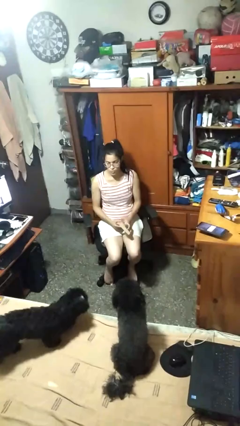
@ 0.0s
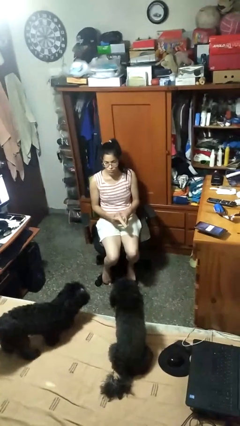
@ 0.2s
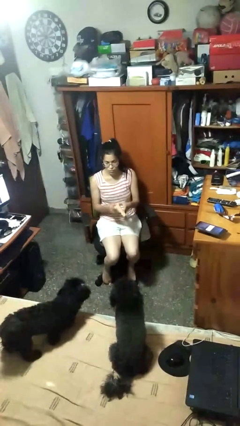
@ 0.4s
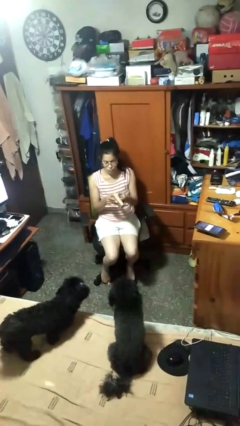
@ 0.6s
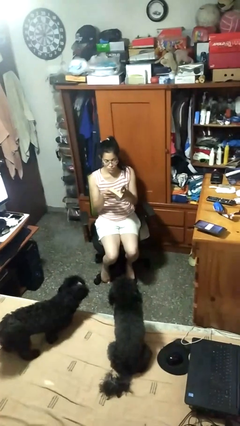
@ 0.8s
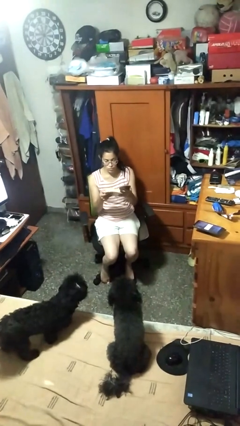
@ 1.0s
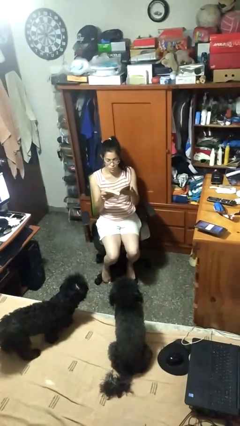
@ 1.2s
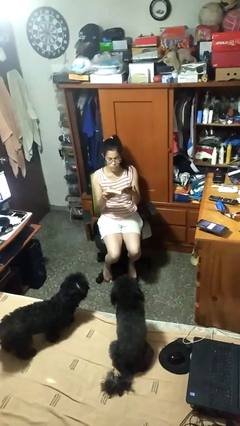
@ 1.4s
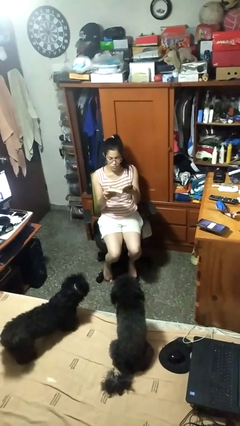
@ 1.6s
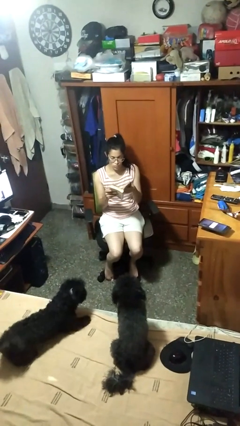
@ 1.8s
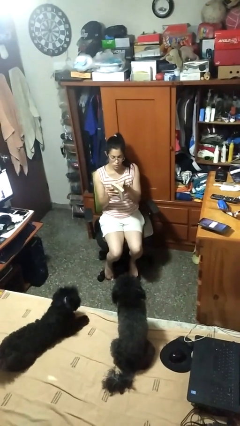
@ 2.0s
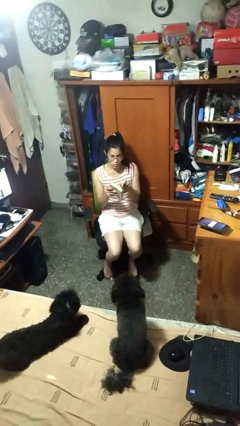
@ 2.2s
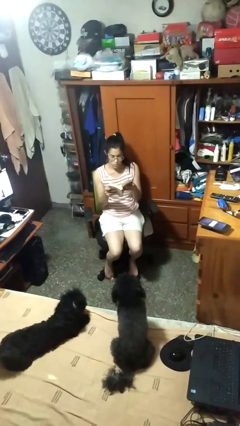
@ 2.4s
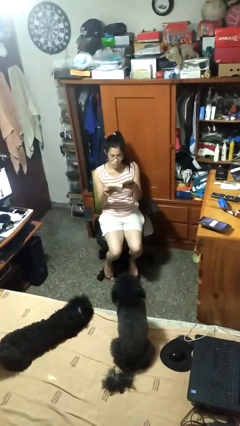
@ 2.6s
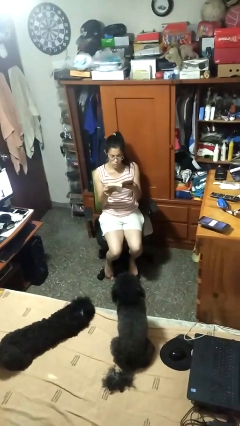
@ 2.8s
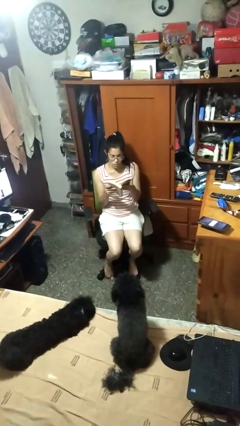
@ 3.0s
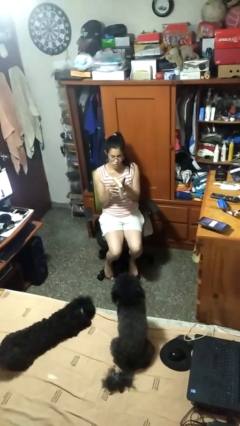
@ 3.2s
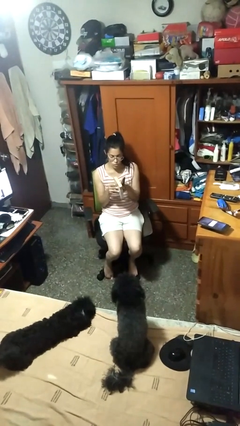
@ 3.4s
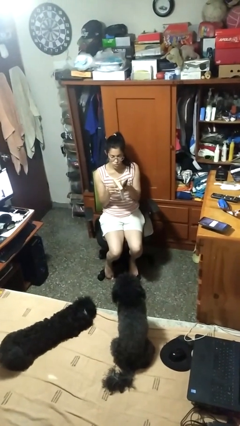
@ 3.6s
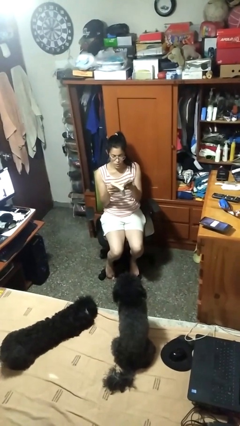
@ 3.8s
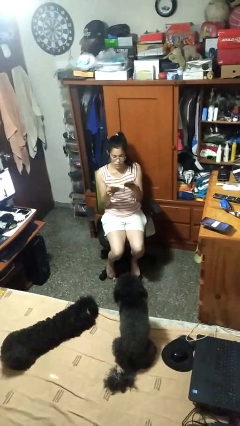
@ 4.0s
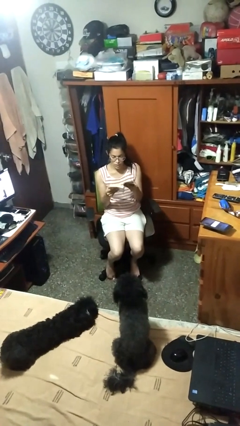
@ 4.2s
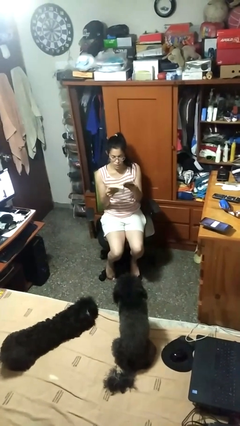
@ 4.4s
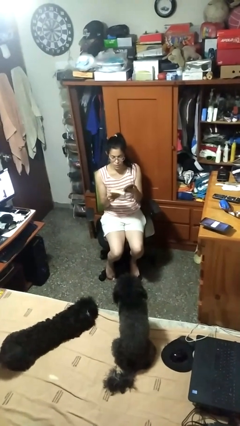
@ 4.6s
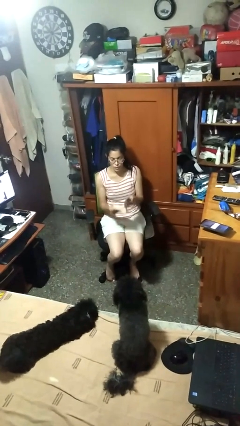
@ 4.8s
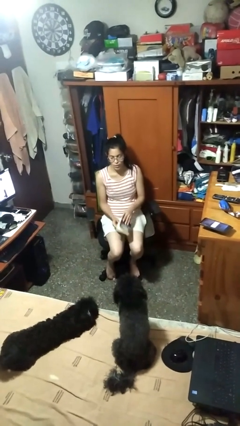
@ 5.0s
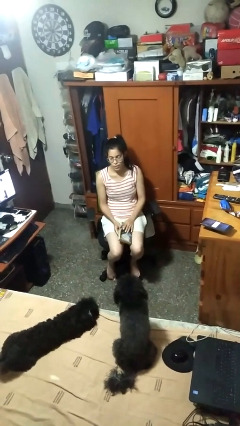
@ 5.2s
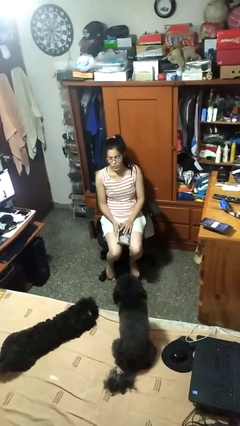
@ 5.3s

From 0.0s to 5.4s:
person reads book

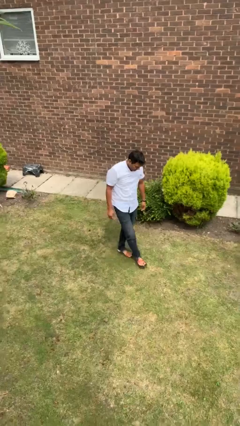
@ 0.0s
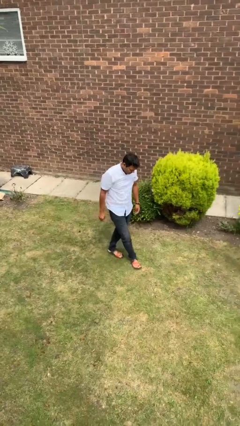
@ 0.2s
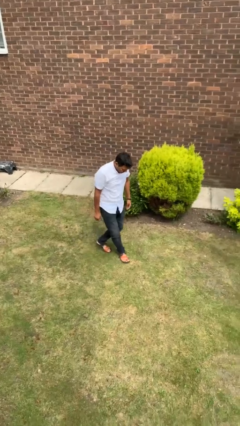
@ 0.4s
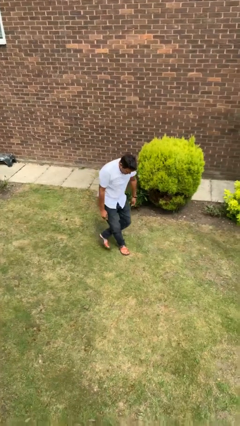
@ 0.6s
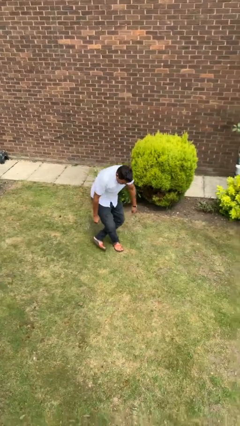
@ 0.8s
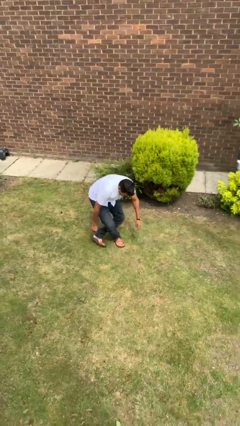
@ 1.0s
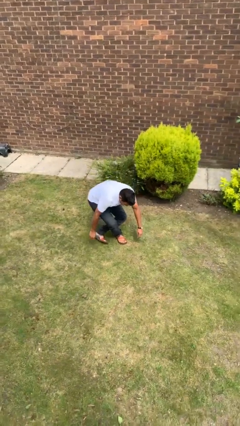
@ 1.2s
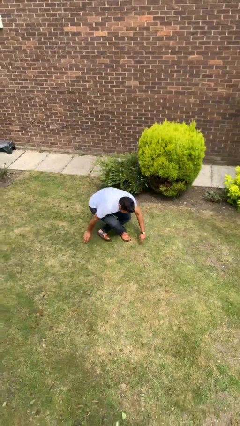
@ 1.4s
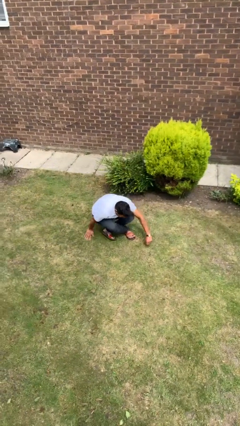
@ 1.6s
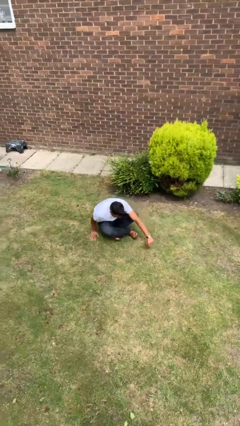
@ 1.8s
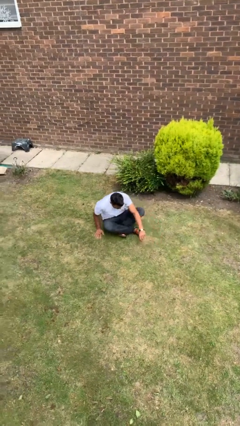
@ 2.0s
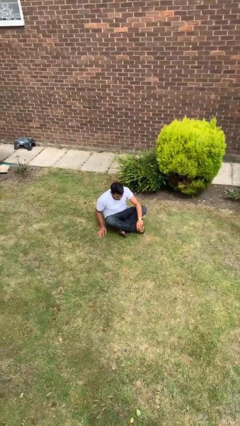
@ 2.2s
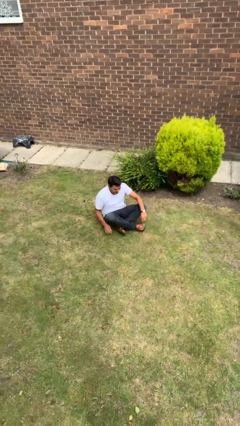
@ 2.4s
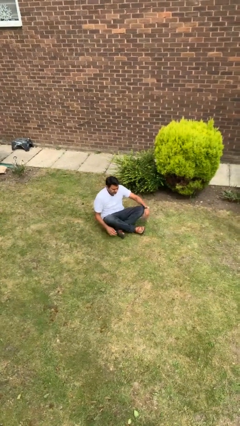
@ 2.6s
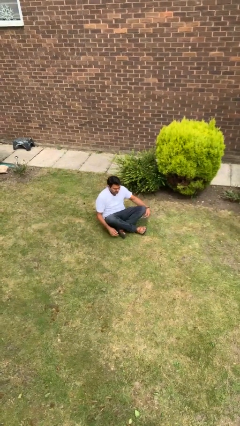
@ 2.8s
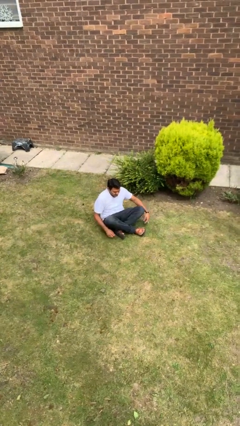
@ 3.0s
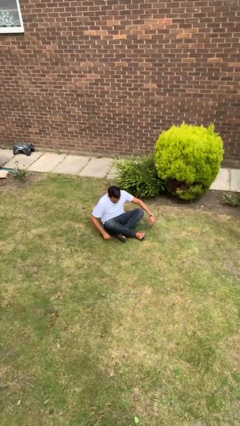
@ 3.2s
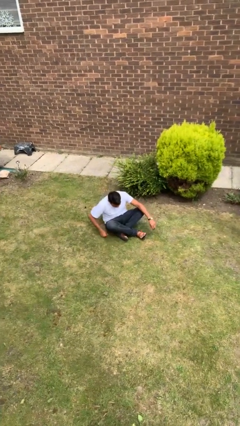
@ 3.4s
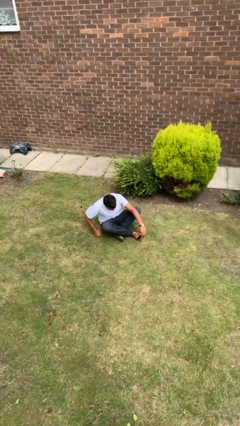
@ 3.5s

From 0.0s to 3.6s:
person sits crisscross

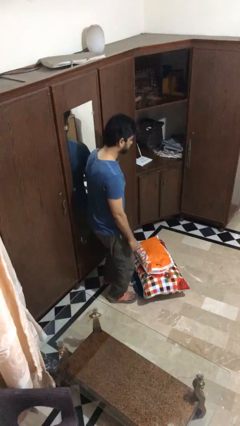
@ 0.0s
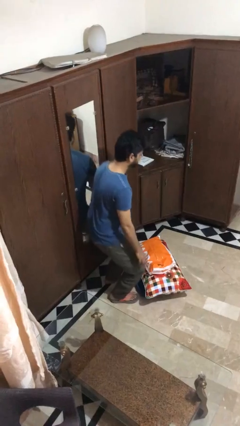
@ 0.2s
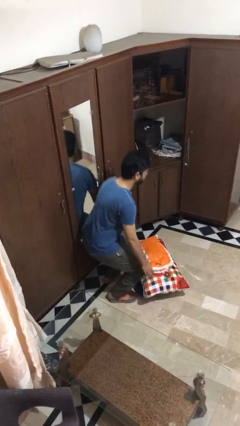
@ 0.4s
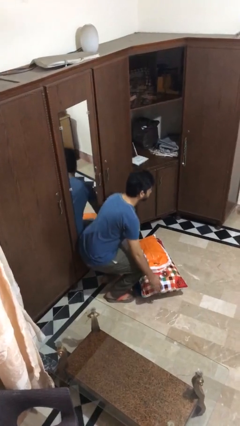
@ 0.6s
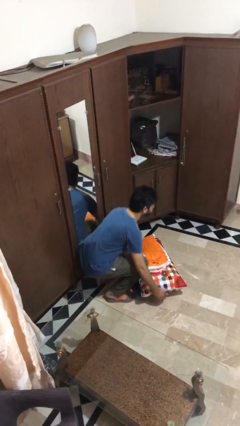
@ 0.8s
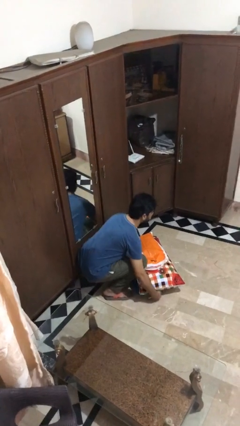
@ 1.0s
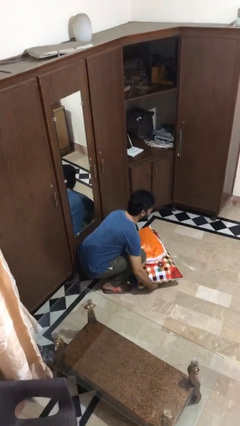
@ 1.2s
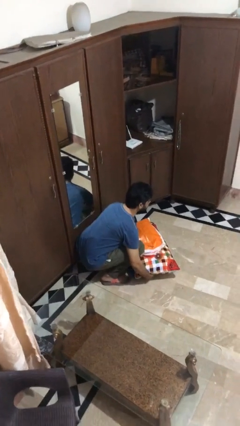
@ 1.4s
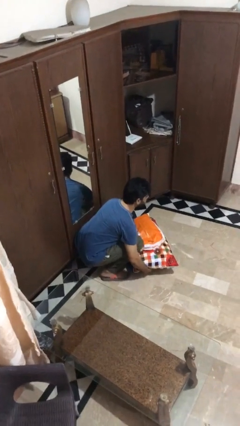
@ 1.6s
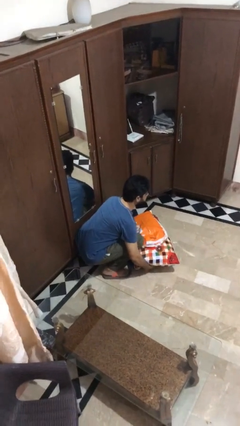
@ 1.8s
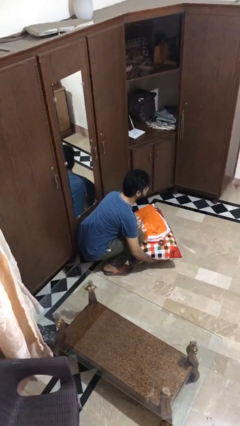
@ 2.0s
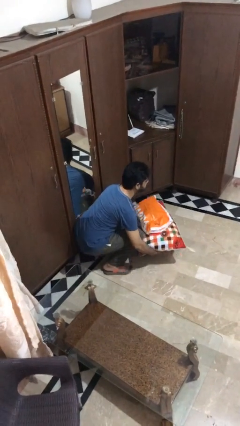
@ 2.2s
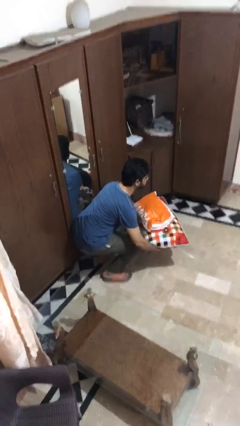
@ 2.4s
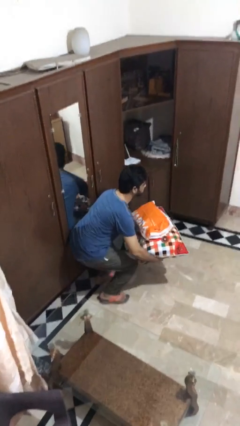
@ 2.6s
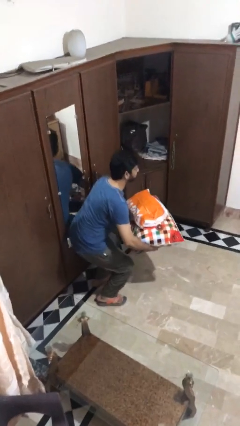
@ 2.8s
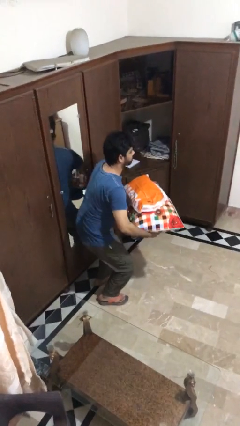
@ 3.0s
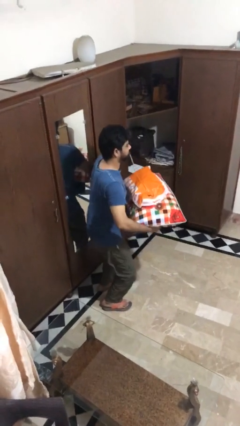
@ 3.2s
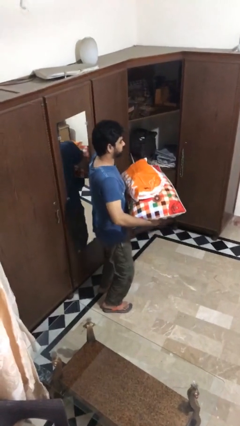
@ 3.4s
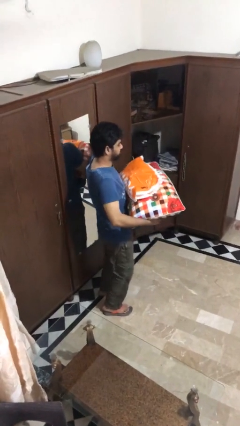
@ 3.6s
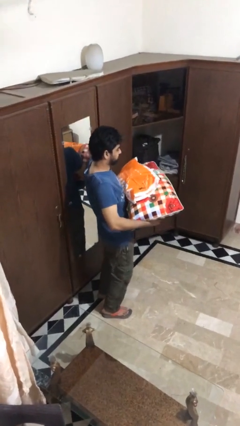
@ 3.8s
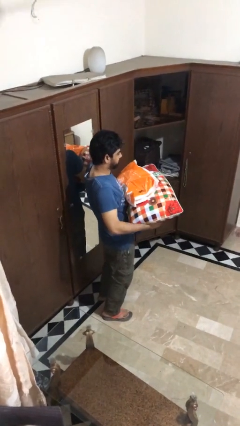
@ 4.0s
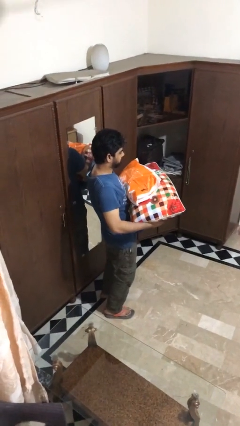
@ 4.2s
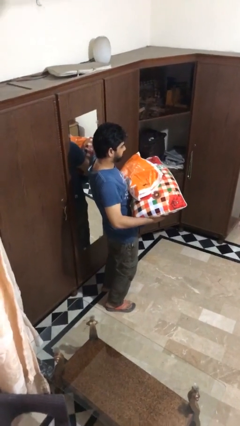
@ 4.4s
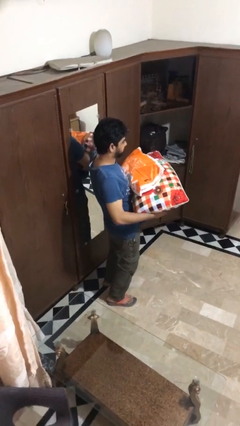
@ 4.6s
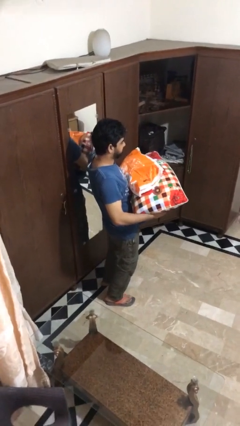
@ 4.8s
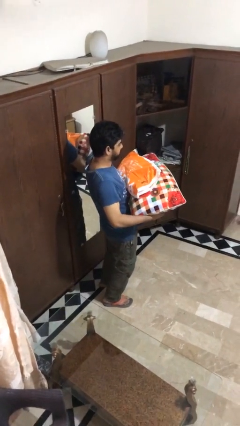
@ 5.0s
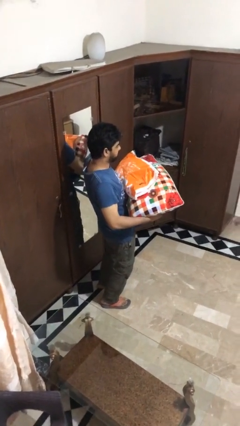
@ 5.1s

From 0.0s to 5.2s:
person picks up object from floor

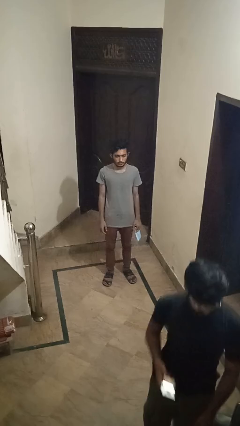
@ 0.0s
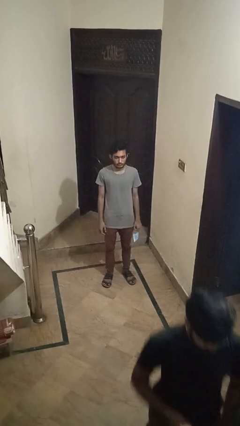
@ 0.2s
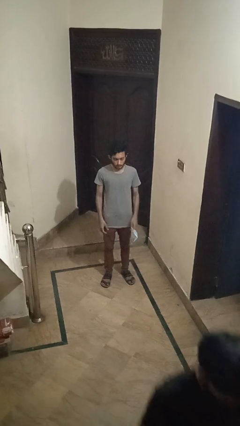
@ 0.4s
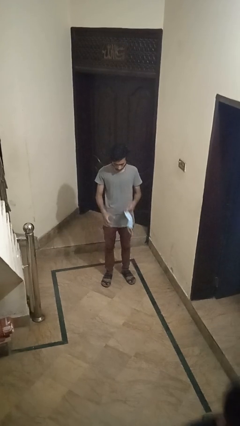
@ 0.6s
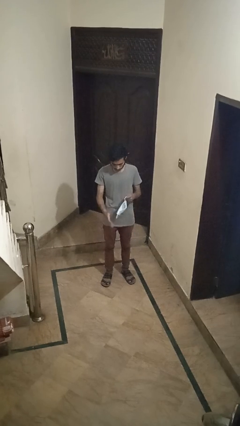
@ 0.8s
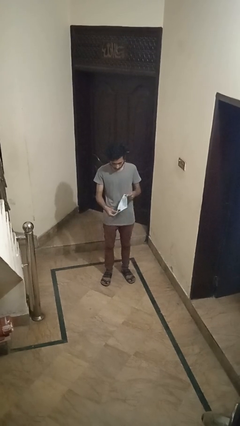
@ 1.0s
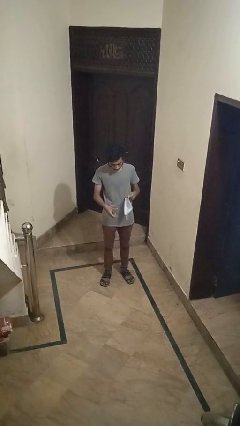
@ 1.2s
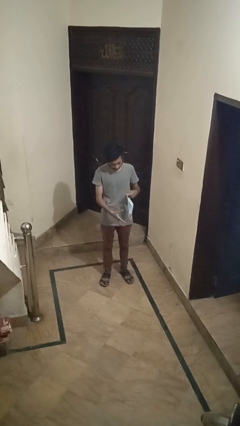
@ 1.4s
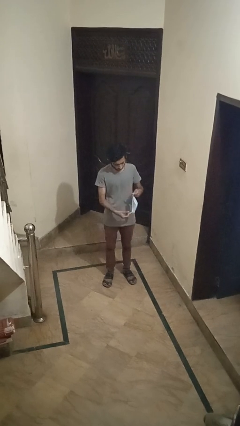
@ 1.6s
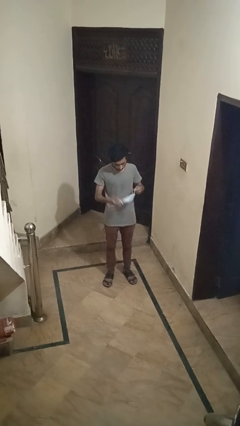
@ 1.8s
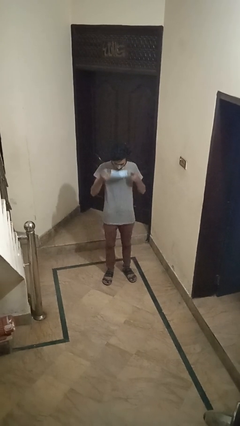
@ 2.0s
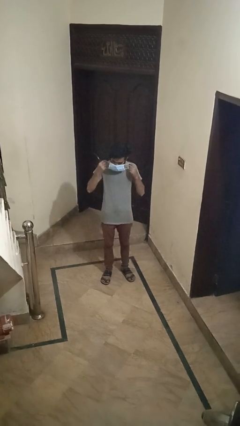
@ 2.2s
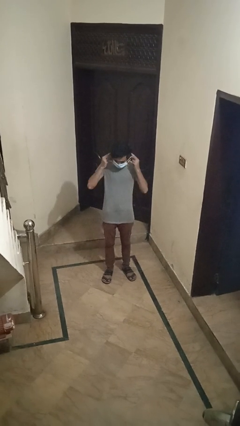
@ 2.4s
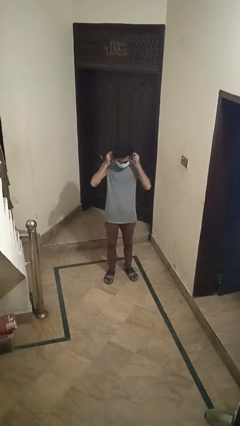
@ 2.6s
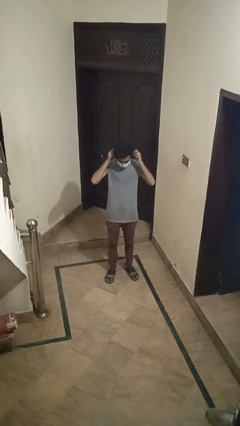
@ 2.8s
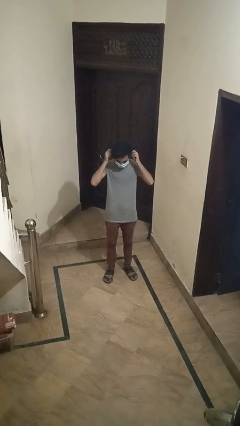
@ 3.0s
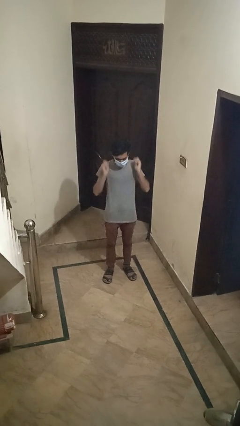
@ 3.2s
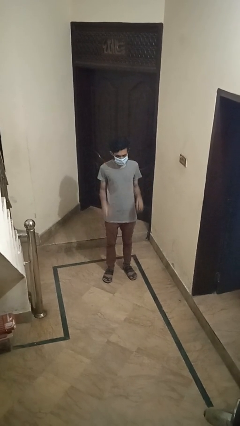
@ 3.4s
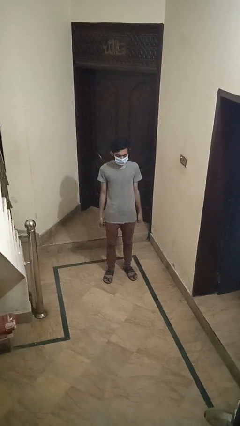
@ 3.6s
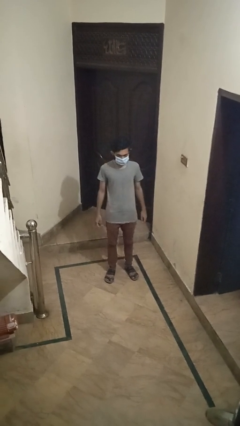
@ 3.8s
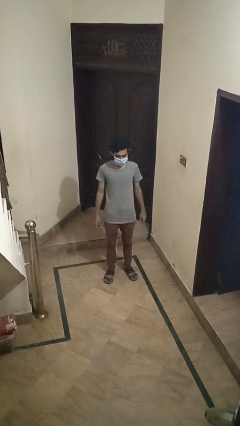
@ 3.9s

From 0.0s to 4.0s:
person puts on facemask
